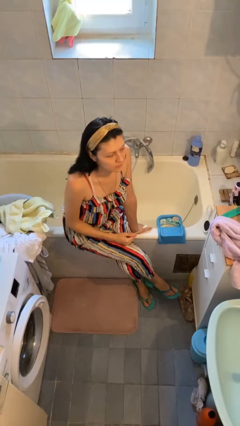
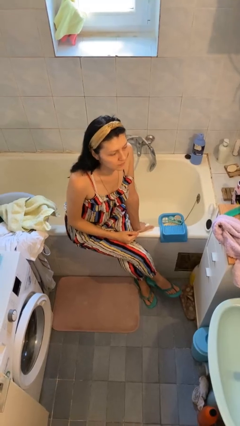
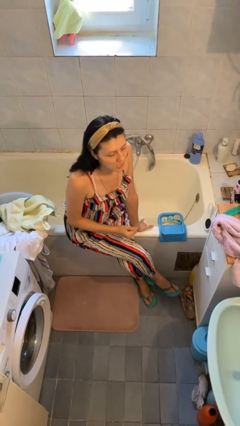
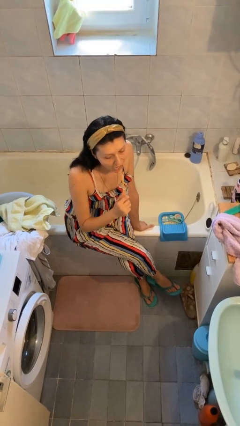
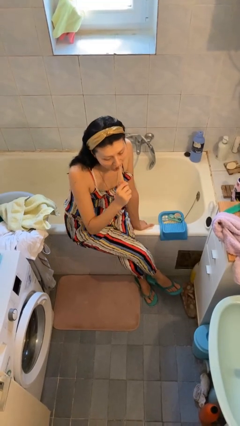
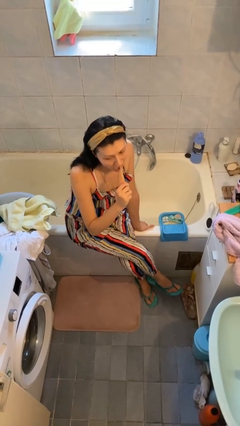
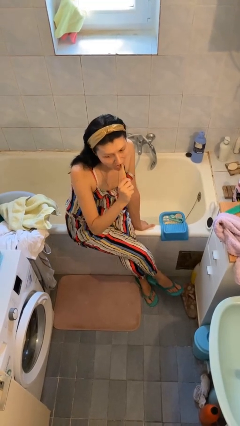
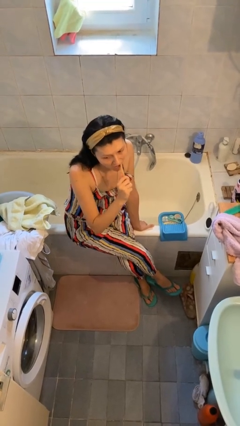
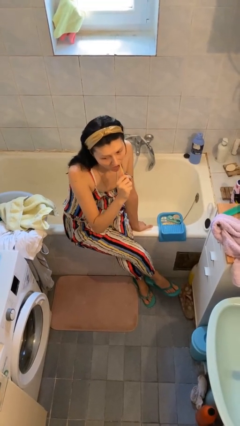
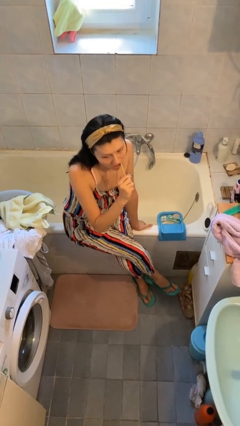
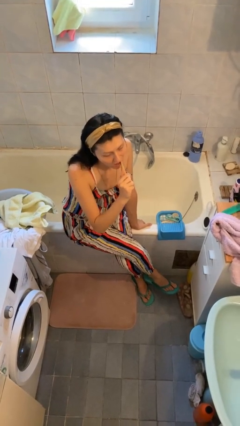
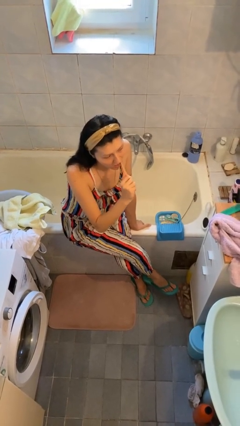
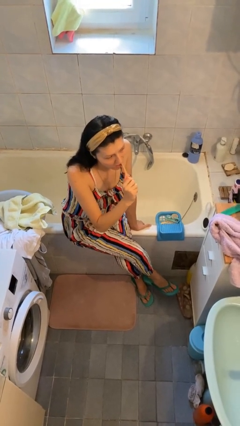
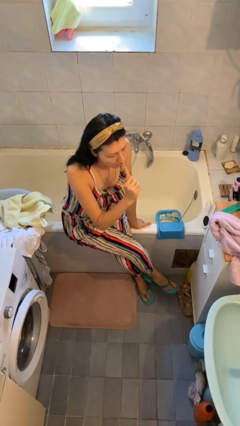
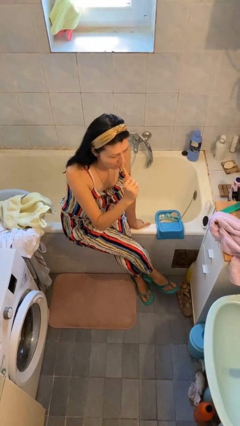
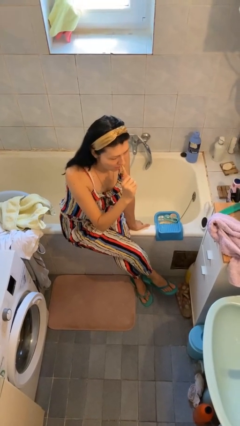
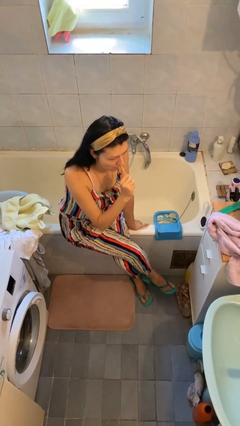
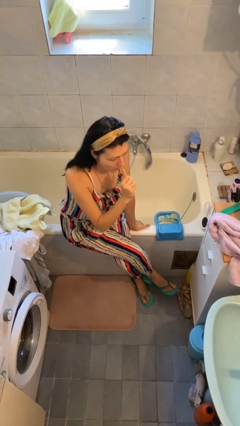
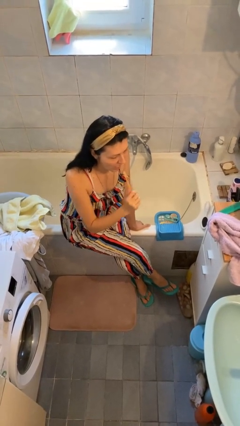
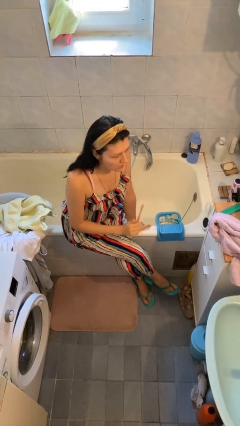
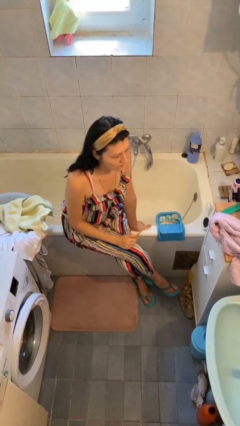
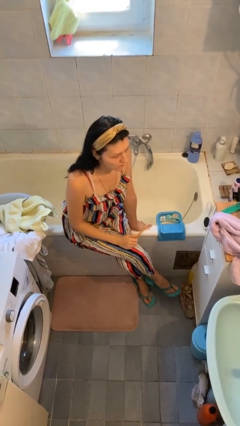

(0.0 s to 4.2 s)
person brushes teeth

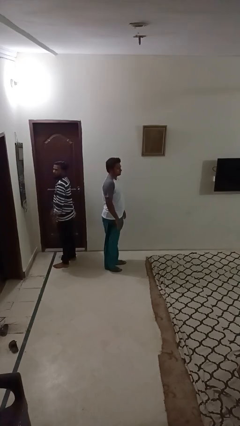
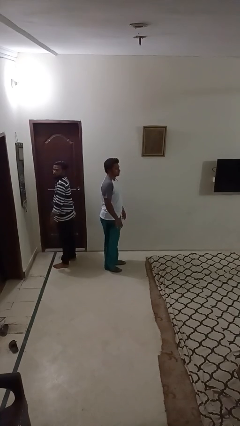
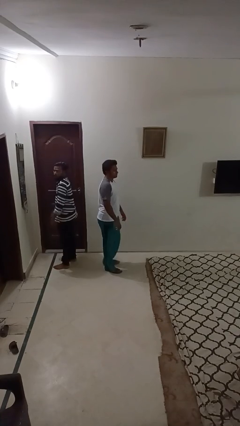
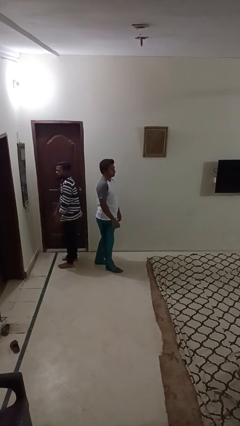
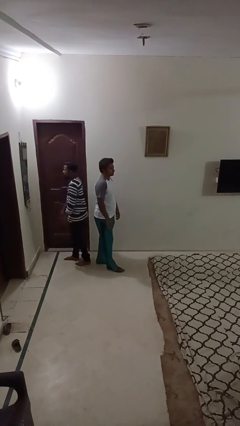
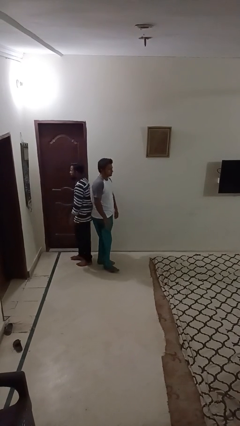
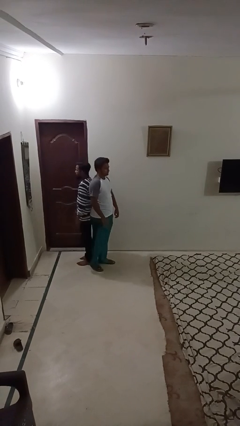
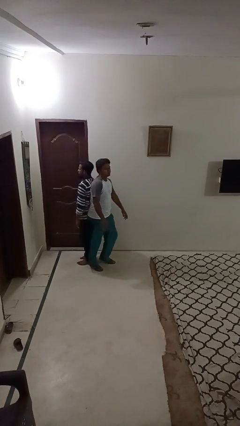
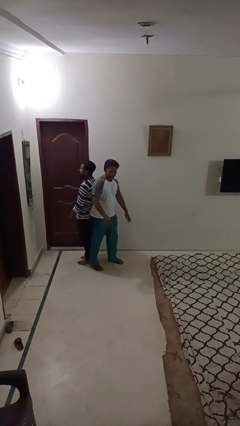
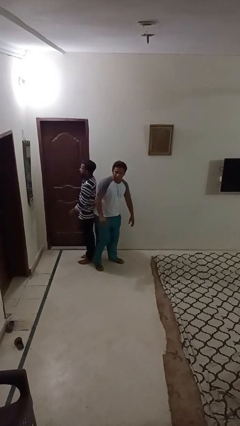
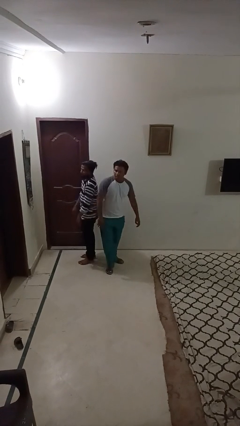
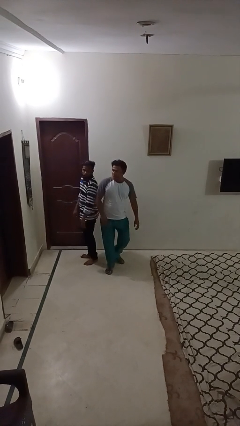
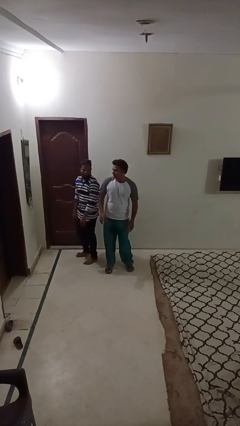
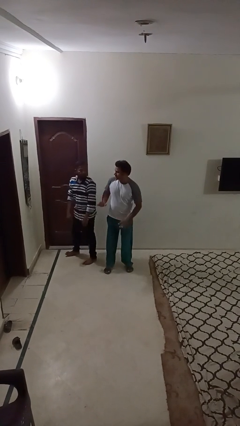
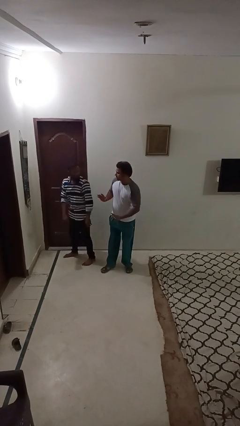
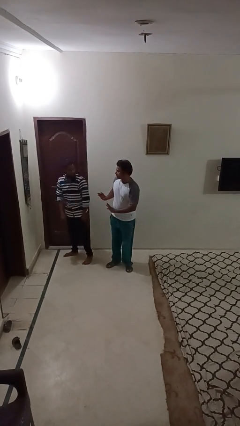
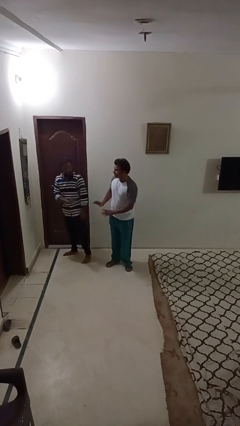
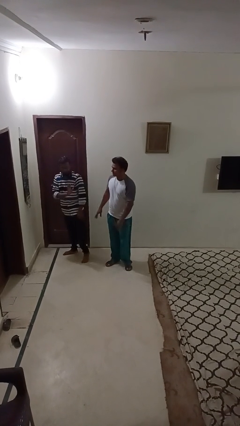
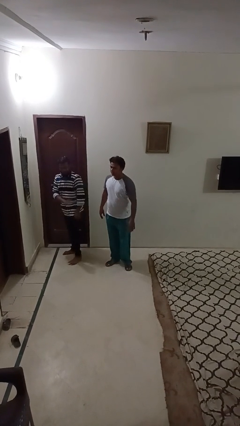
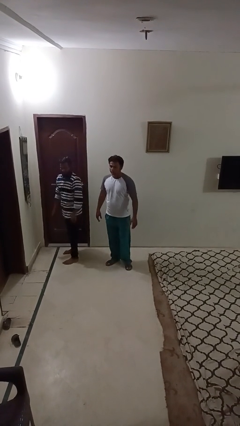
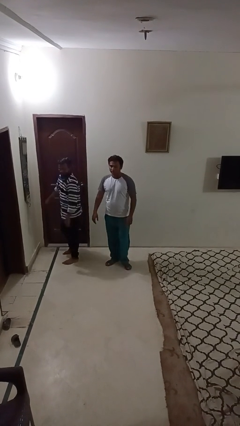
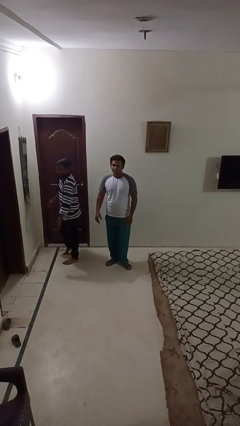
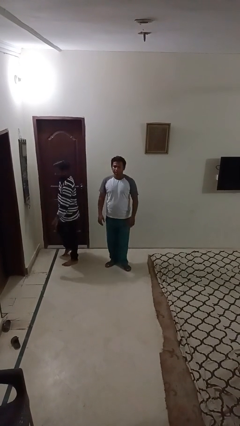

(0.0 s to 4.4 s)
person bumps into person

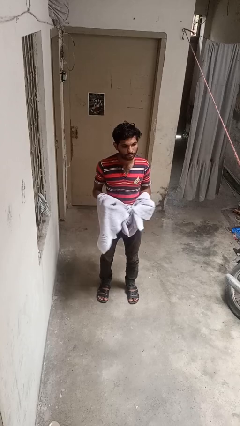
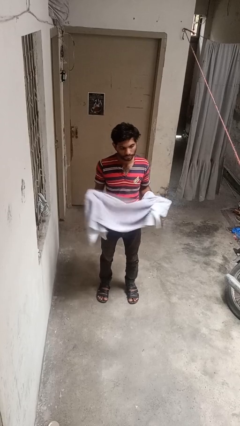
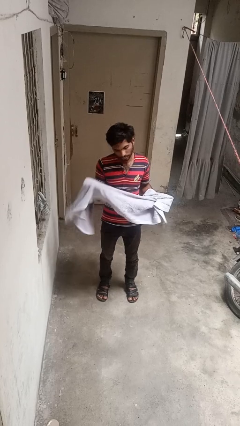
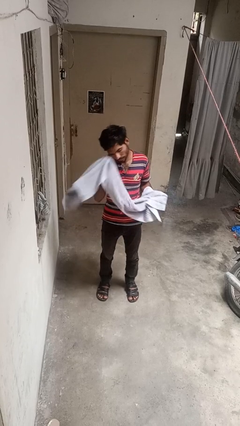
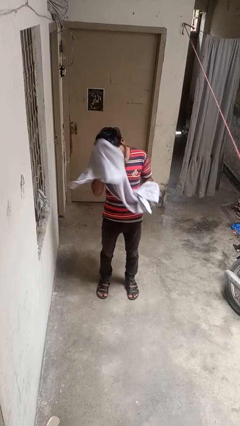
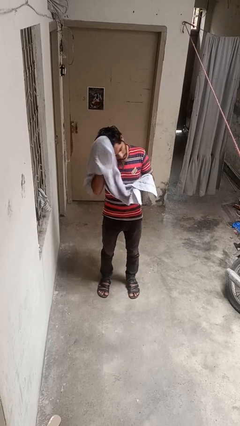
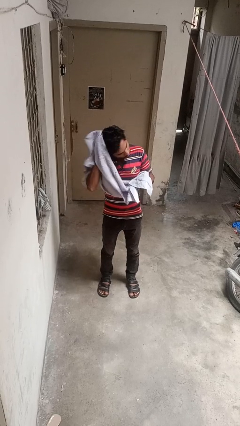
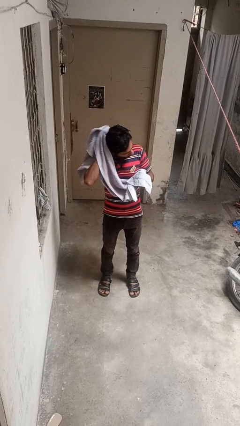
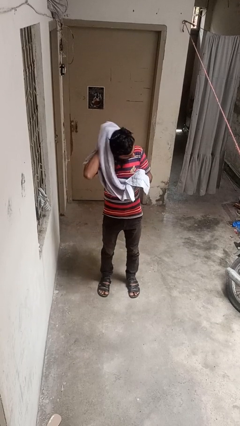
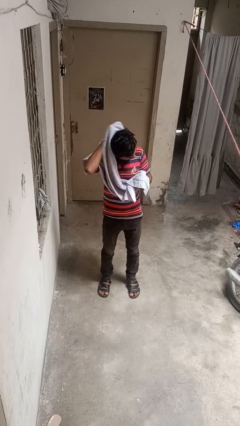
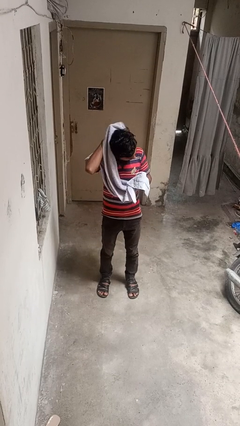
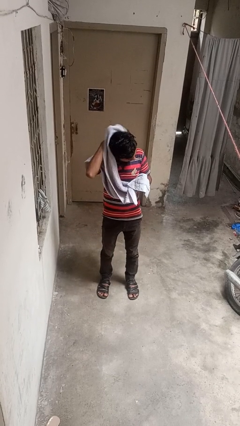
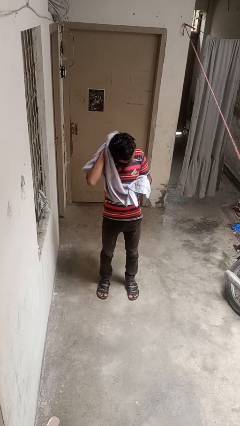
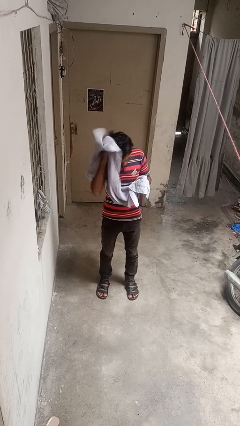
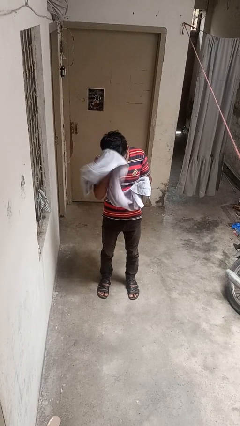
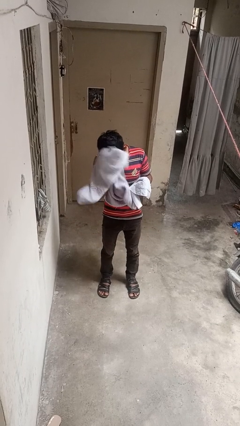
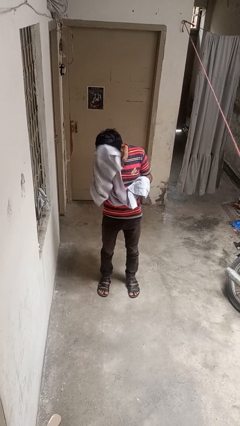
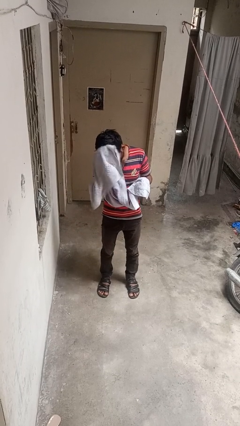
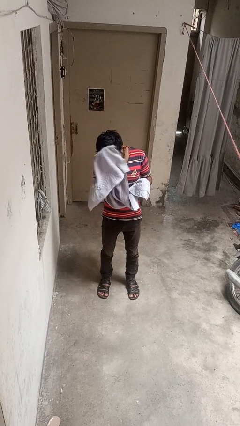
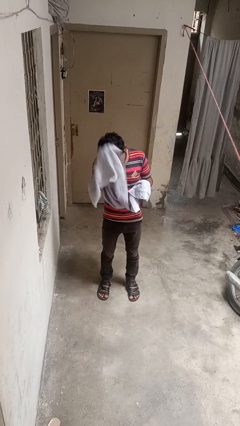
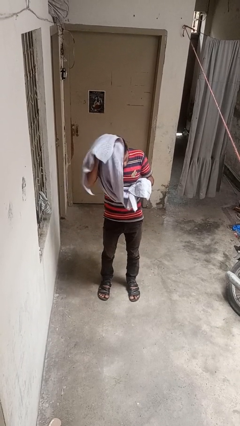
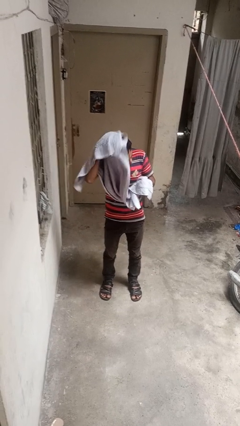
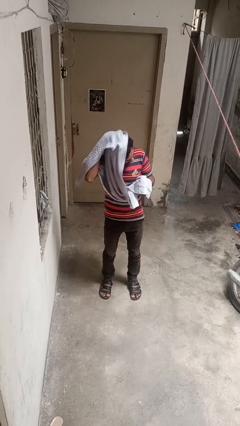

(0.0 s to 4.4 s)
person dries hair with towel

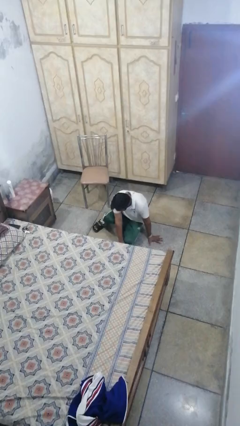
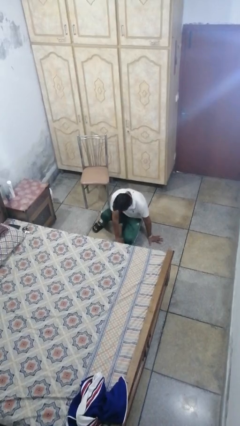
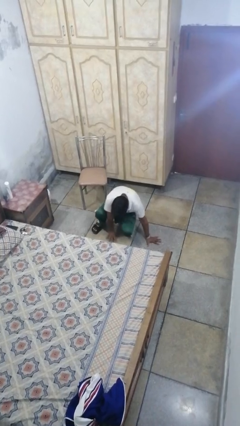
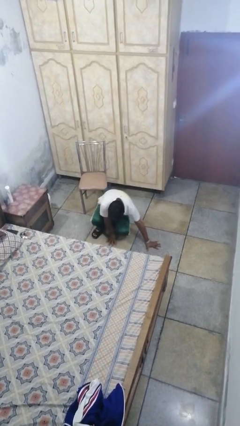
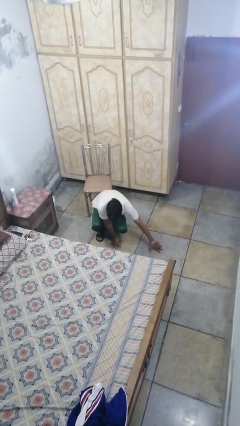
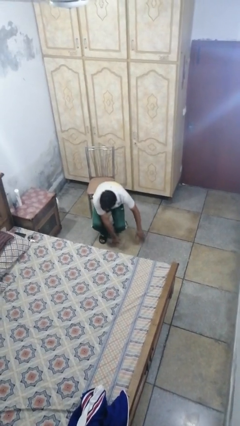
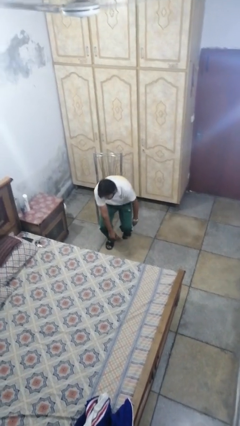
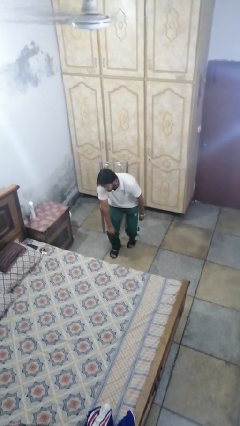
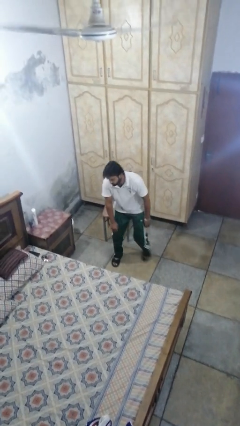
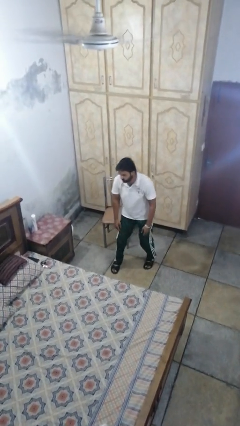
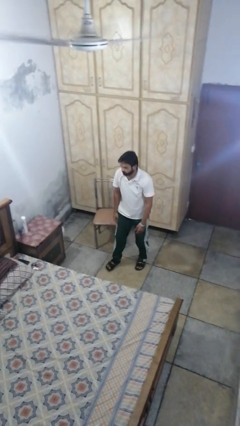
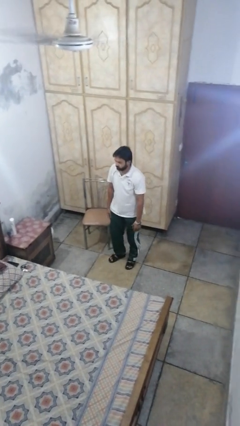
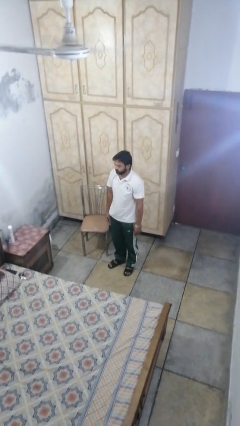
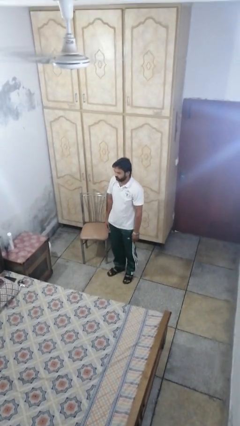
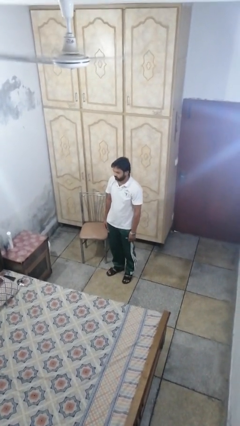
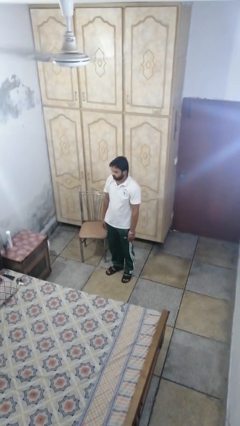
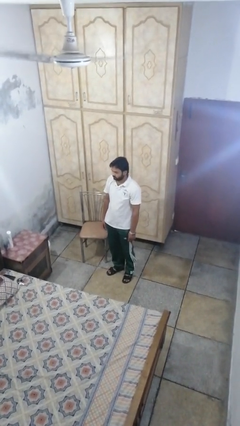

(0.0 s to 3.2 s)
person stands up from floor

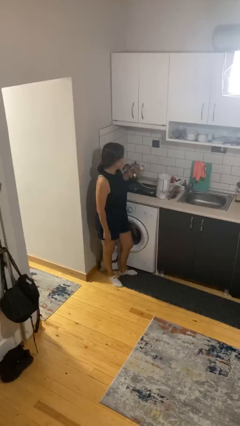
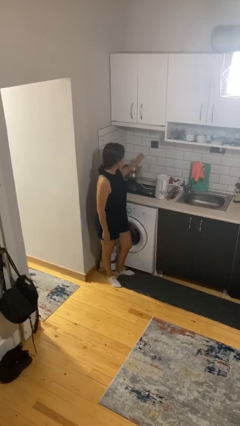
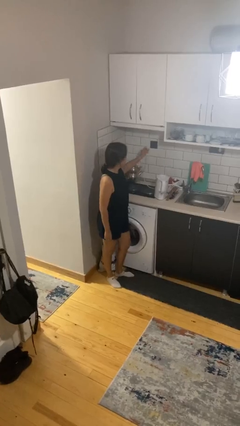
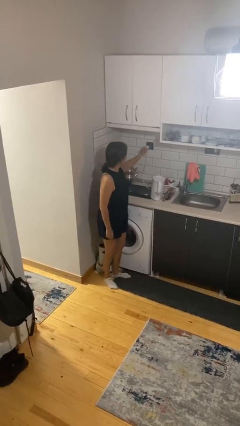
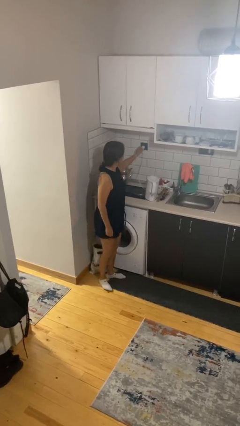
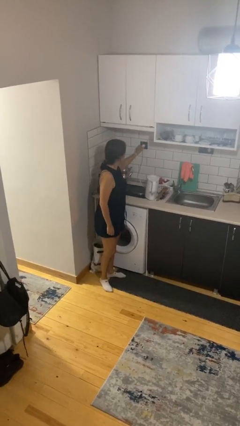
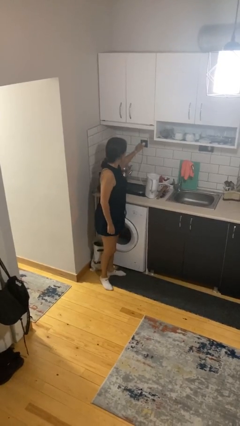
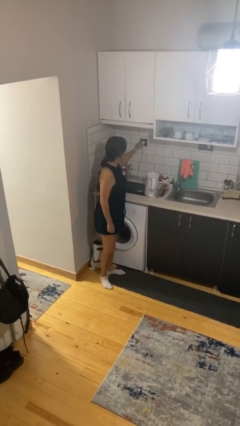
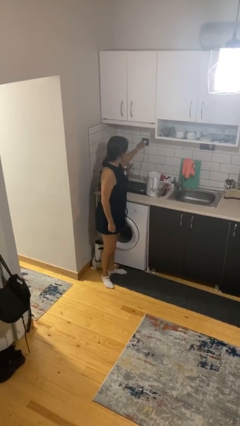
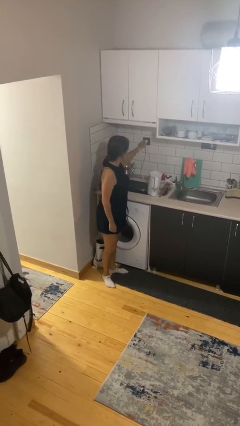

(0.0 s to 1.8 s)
person plugs into electrical socket
